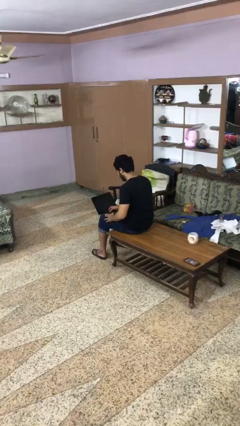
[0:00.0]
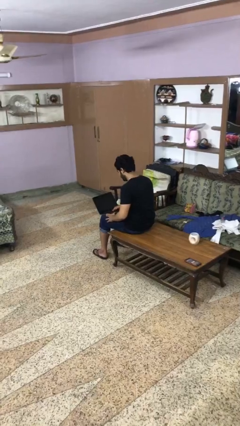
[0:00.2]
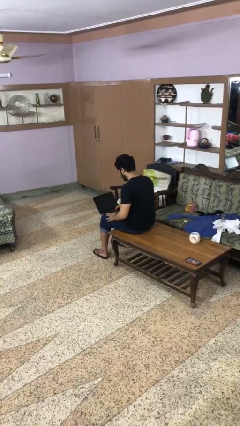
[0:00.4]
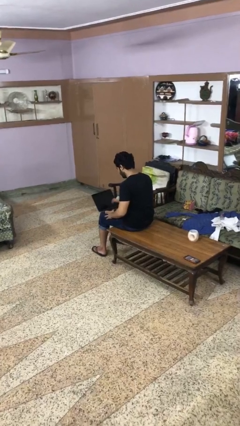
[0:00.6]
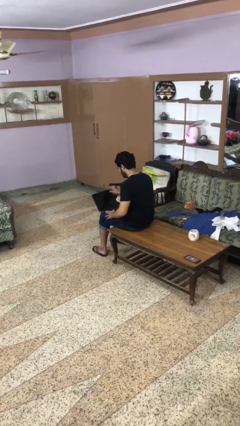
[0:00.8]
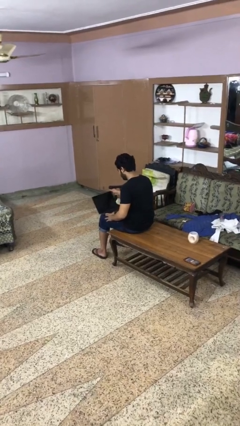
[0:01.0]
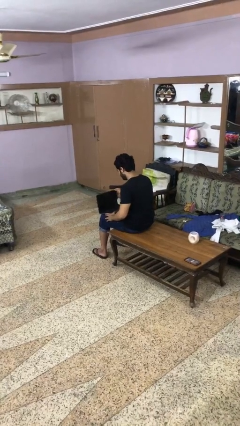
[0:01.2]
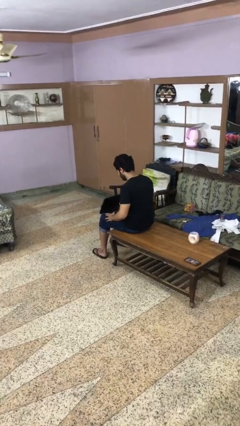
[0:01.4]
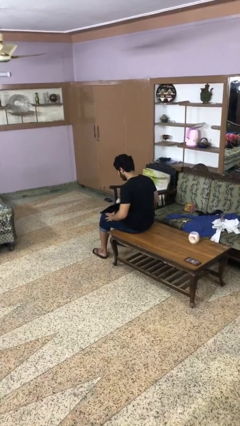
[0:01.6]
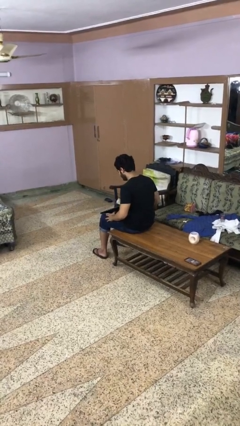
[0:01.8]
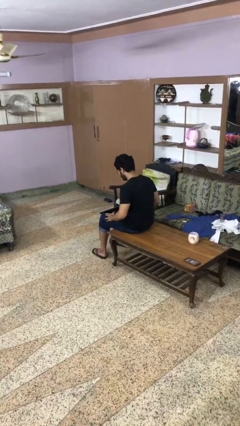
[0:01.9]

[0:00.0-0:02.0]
person closes laptop

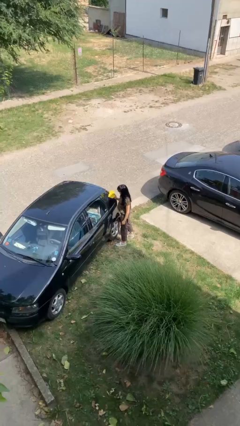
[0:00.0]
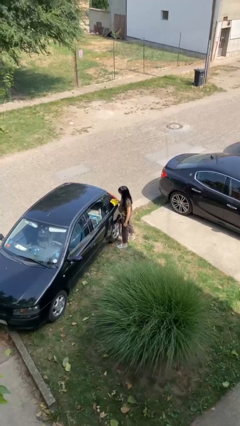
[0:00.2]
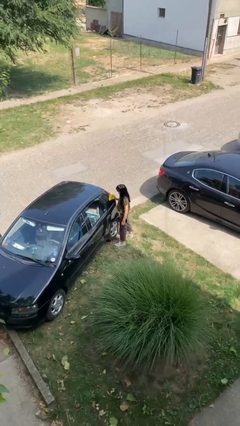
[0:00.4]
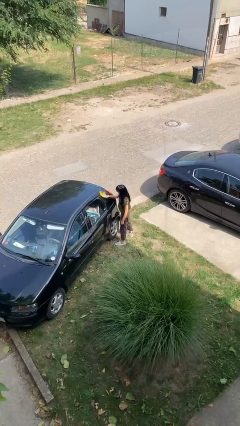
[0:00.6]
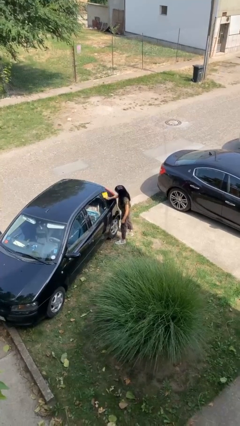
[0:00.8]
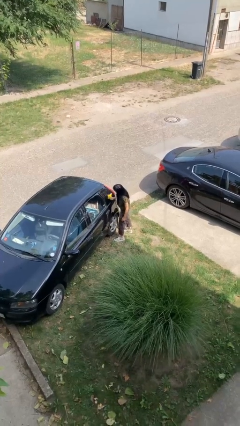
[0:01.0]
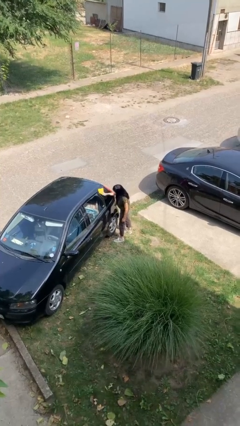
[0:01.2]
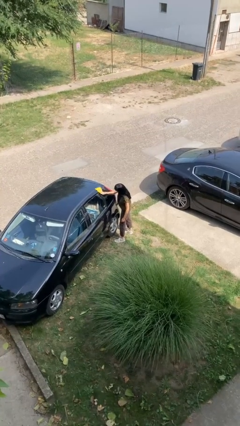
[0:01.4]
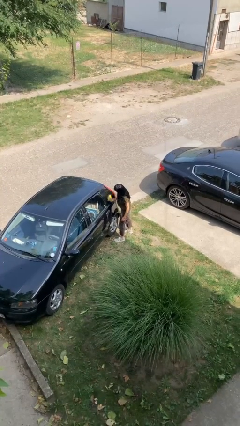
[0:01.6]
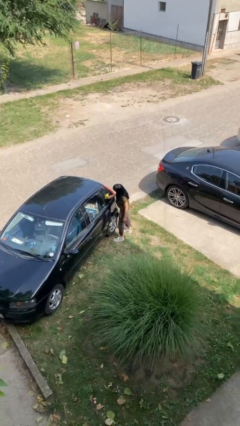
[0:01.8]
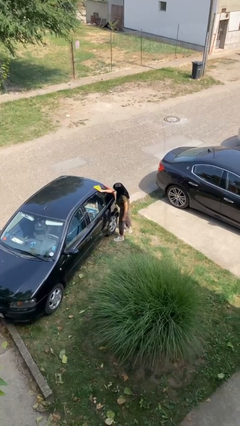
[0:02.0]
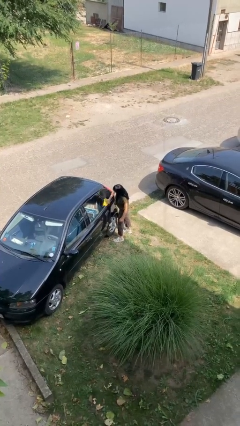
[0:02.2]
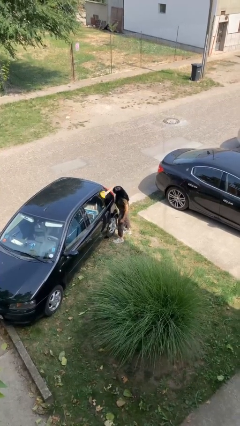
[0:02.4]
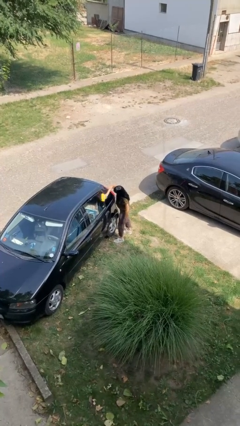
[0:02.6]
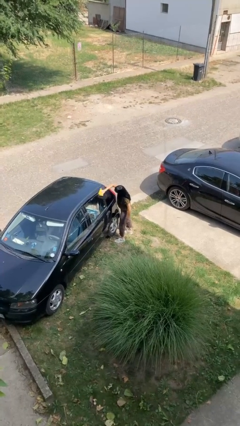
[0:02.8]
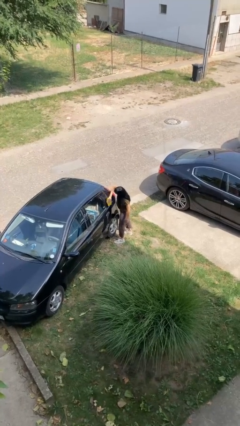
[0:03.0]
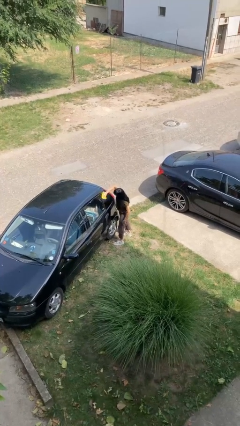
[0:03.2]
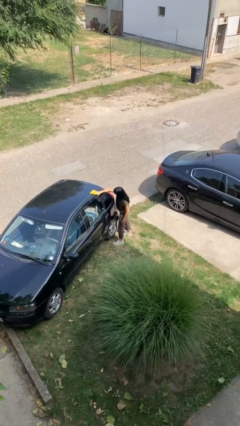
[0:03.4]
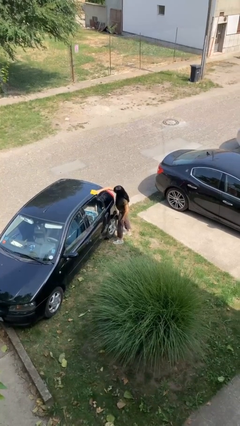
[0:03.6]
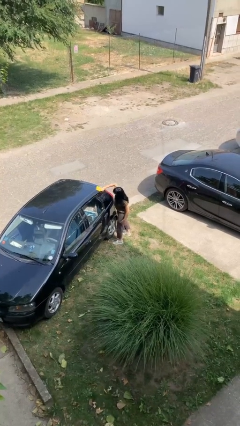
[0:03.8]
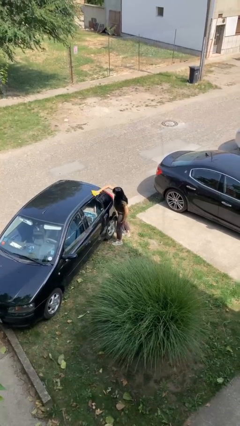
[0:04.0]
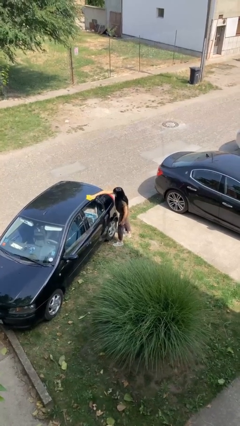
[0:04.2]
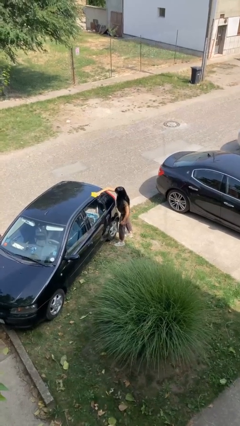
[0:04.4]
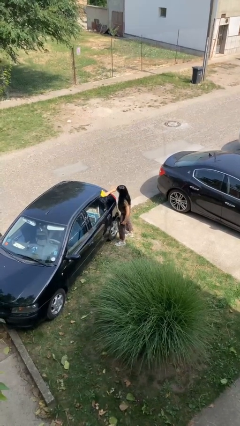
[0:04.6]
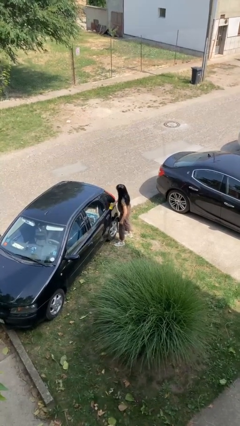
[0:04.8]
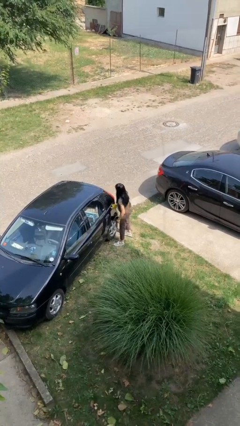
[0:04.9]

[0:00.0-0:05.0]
person polishes car with rag

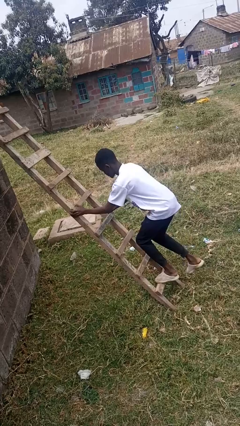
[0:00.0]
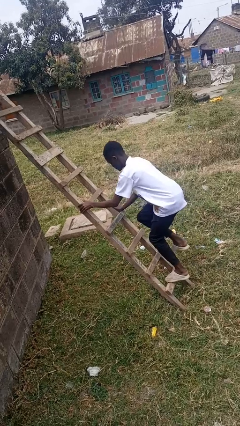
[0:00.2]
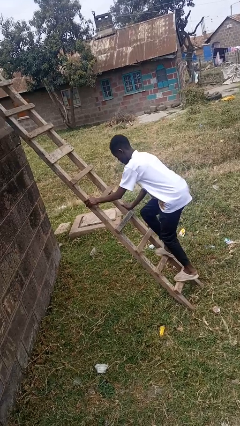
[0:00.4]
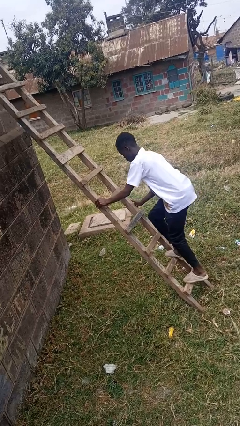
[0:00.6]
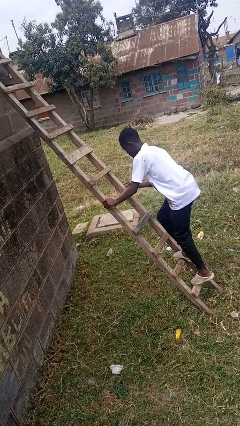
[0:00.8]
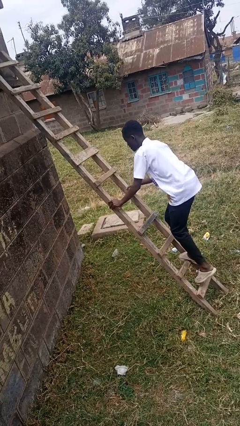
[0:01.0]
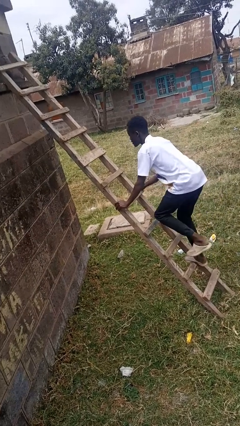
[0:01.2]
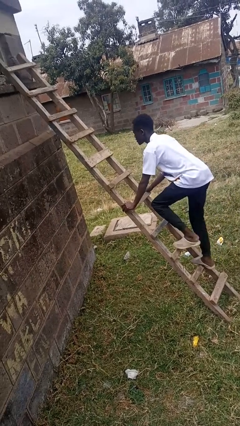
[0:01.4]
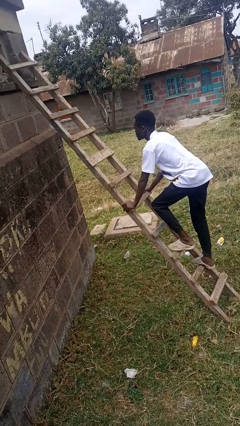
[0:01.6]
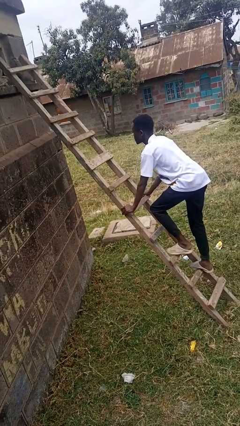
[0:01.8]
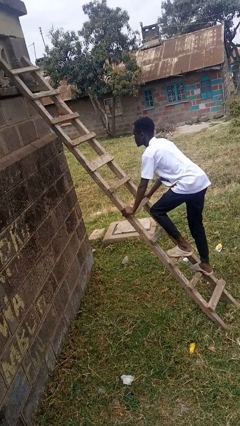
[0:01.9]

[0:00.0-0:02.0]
person climbs up ladder

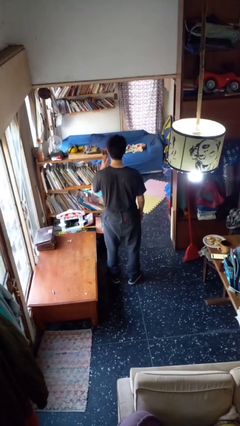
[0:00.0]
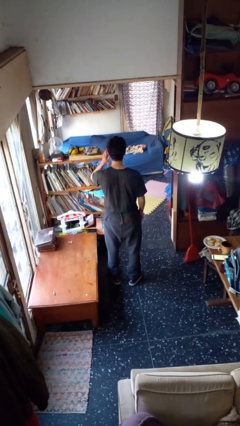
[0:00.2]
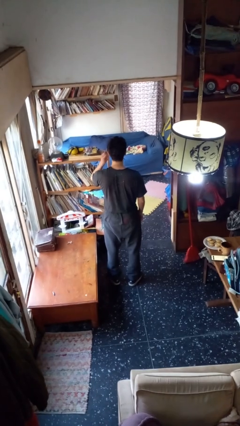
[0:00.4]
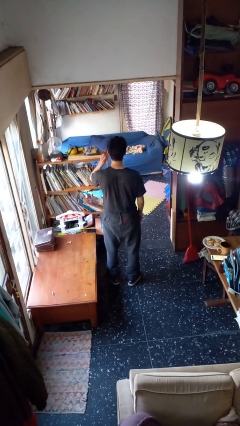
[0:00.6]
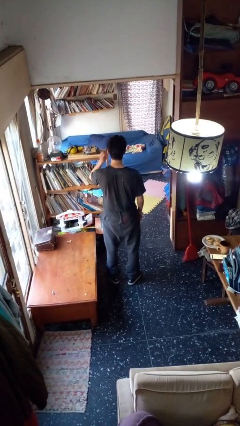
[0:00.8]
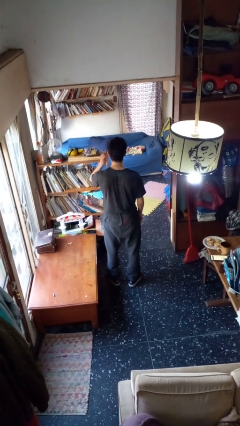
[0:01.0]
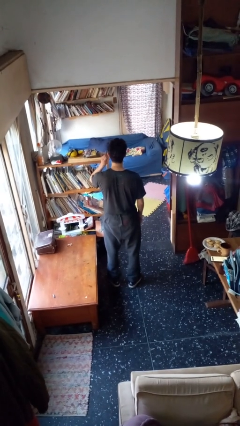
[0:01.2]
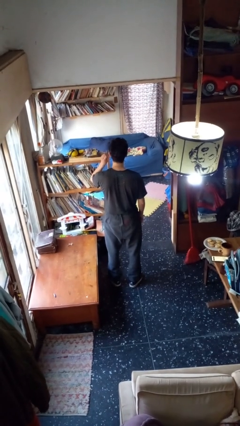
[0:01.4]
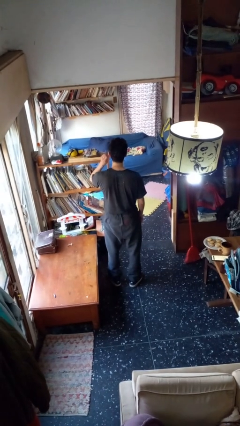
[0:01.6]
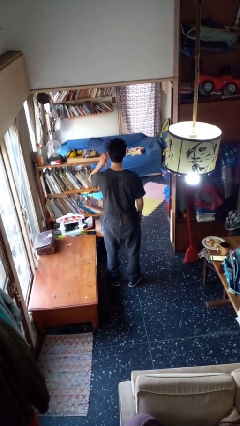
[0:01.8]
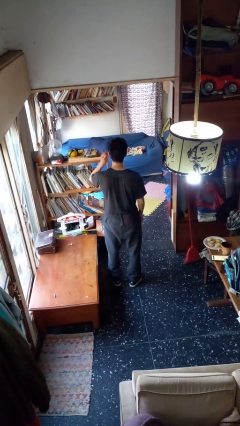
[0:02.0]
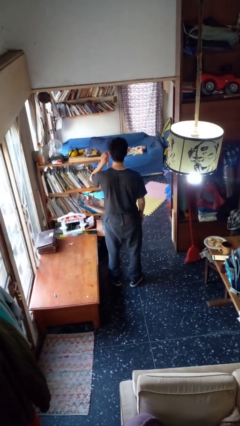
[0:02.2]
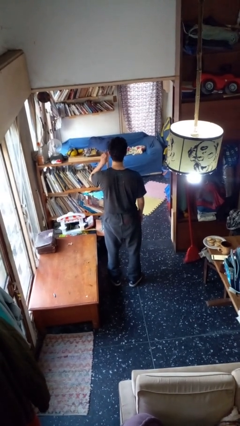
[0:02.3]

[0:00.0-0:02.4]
person touches earlobe

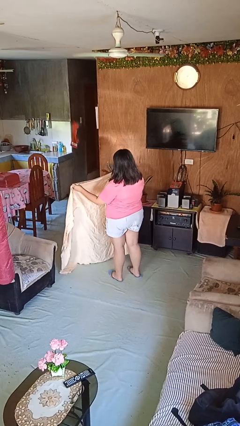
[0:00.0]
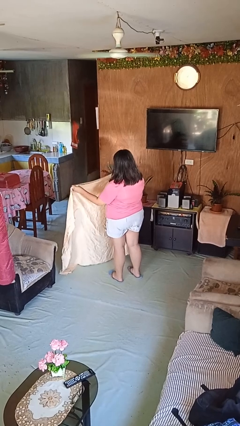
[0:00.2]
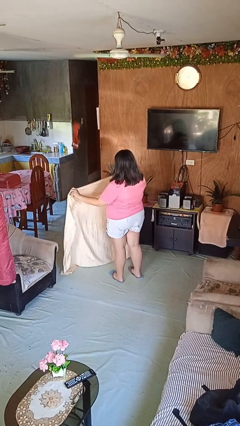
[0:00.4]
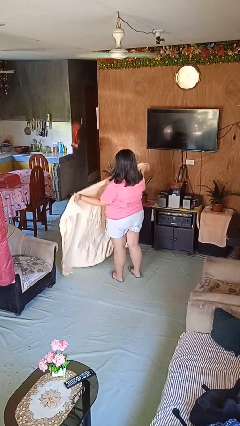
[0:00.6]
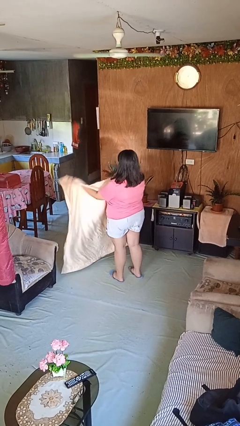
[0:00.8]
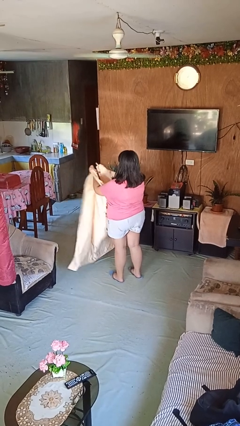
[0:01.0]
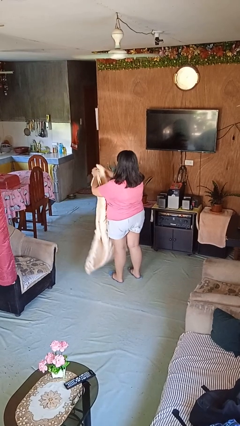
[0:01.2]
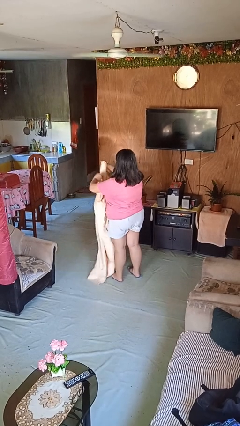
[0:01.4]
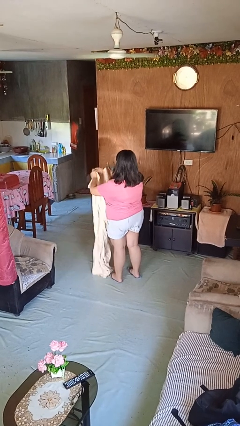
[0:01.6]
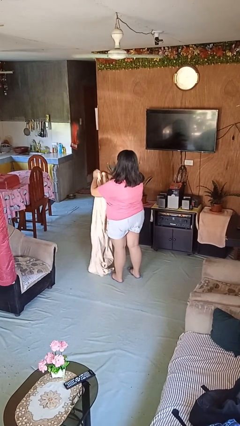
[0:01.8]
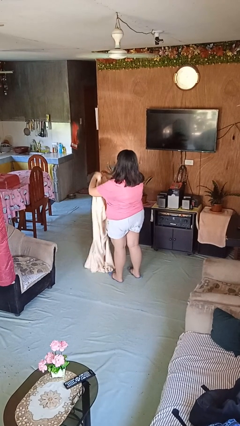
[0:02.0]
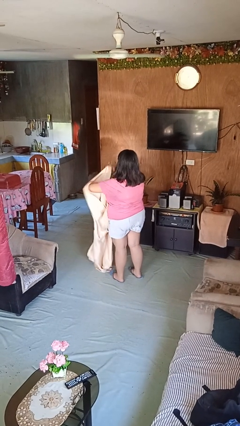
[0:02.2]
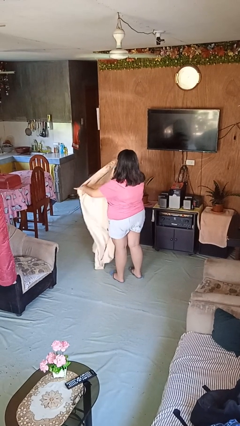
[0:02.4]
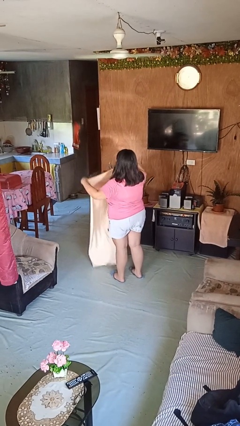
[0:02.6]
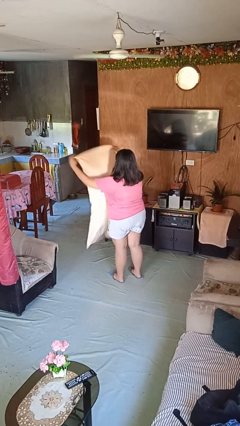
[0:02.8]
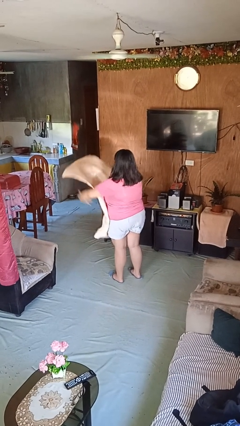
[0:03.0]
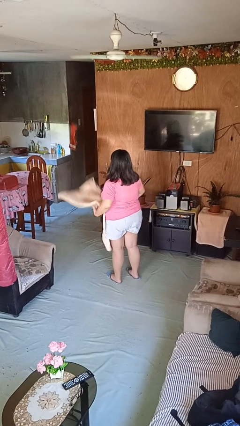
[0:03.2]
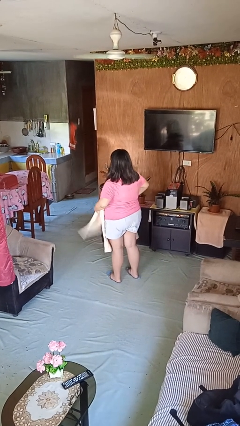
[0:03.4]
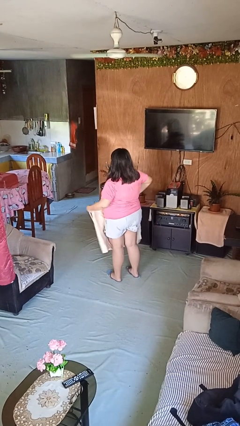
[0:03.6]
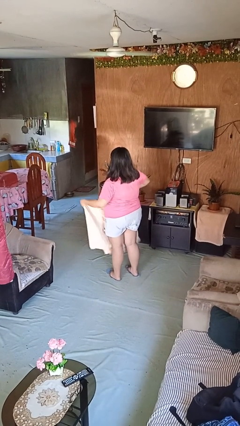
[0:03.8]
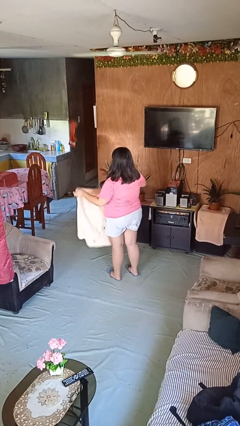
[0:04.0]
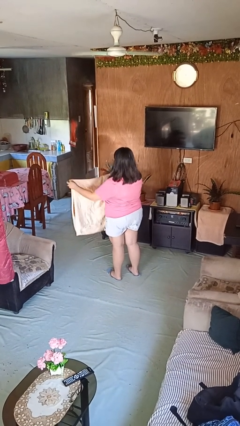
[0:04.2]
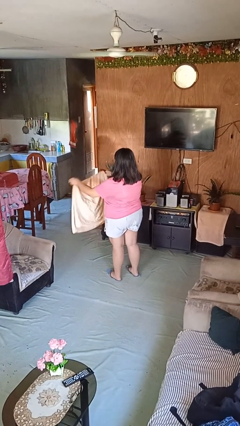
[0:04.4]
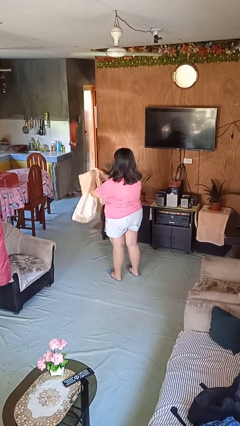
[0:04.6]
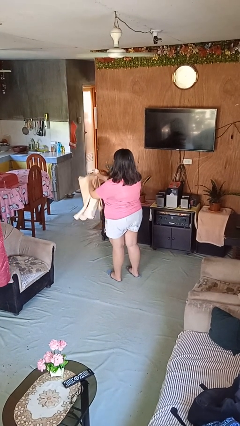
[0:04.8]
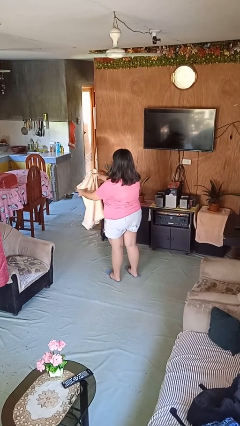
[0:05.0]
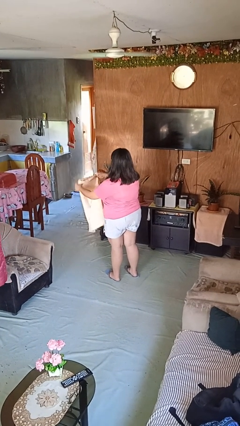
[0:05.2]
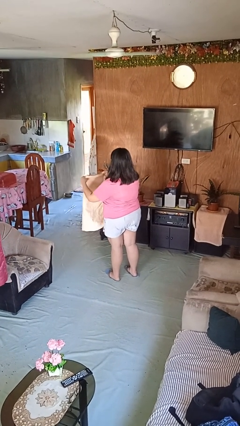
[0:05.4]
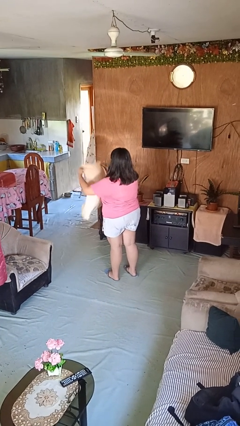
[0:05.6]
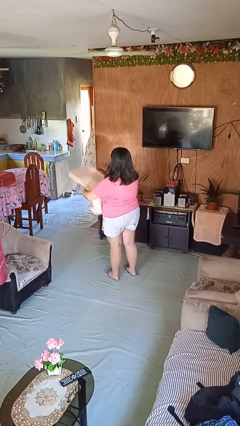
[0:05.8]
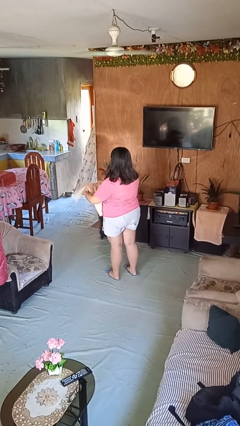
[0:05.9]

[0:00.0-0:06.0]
person folds blanket

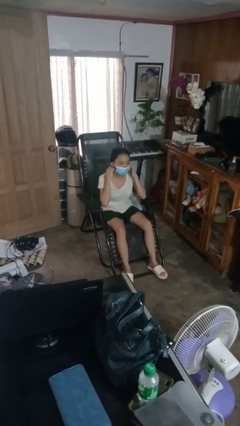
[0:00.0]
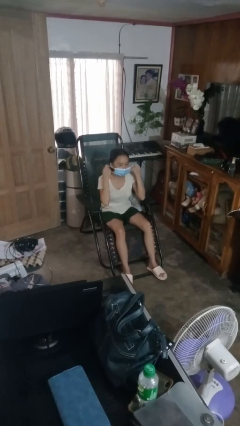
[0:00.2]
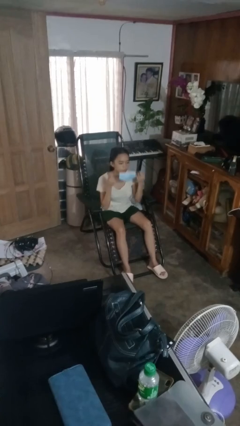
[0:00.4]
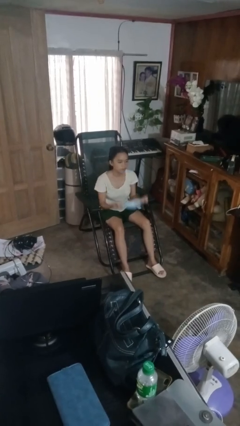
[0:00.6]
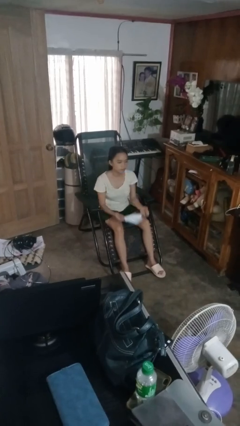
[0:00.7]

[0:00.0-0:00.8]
person takes off facemask
